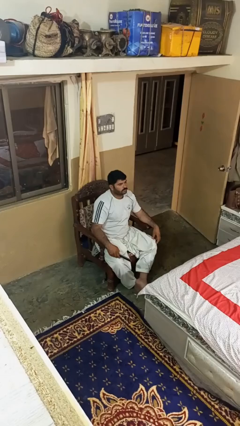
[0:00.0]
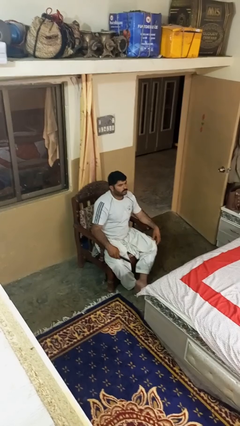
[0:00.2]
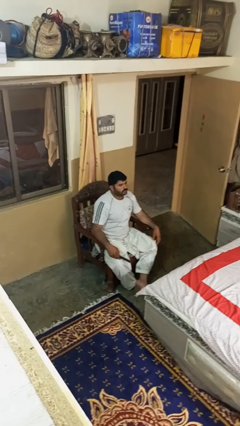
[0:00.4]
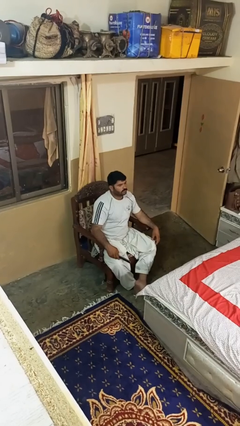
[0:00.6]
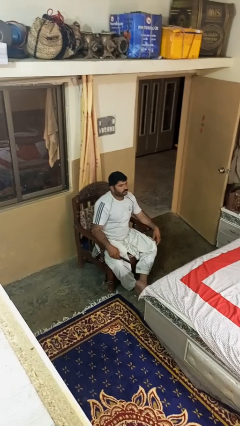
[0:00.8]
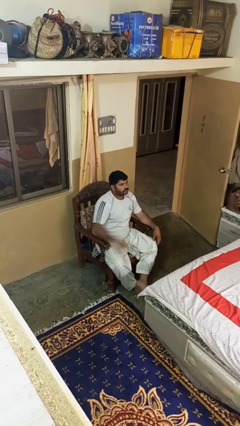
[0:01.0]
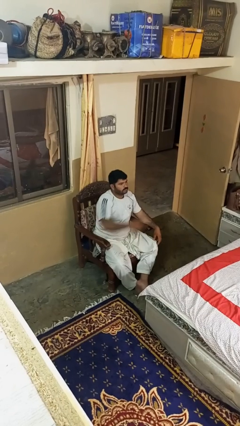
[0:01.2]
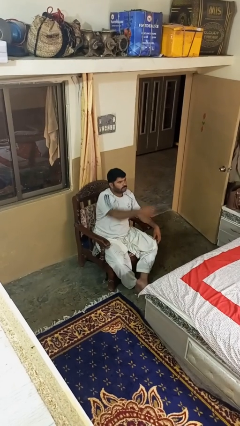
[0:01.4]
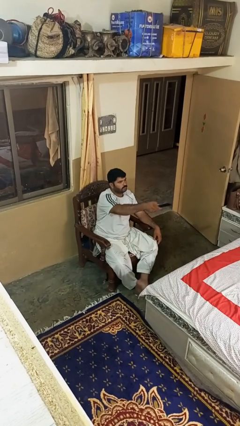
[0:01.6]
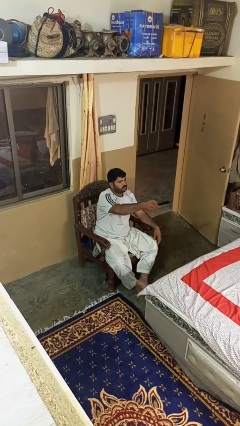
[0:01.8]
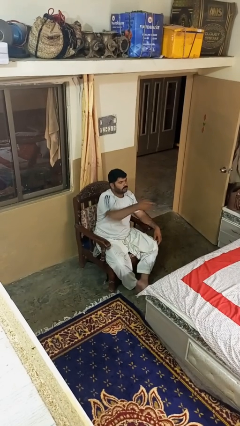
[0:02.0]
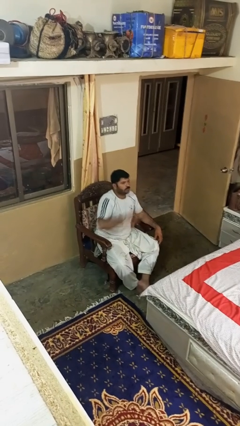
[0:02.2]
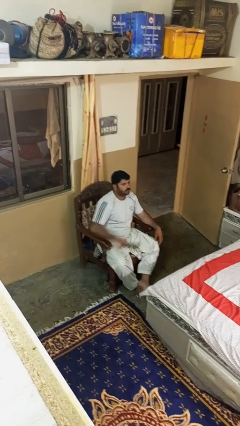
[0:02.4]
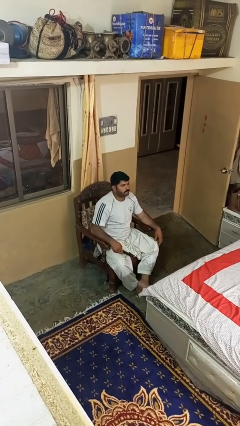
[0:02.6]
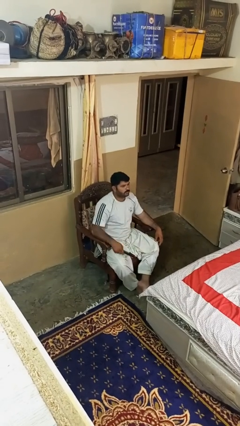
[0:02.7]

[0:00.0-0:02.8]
person uses television remote

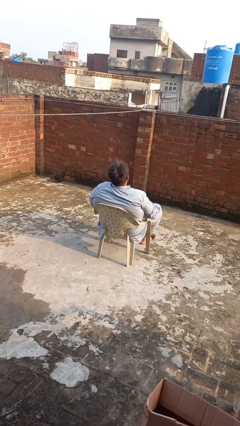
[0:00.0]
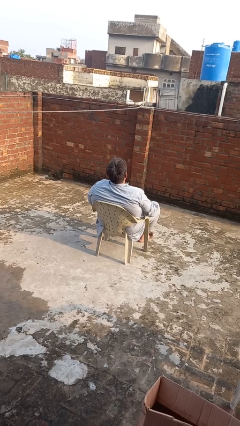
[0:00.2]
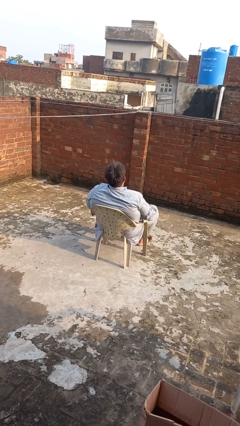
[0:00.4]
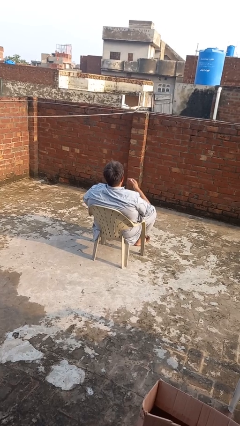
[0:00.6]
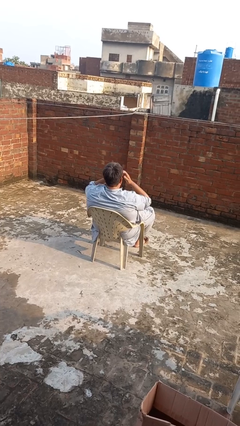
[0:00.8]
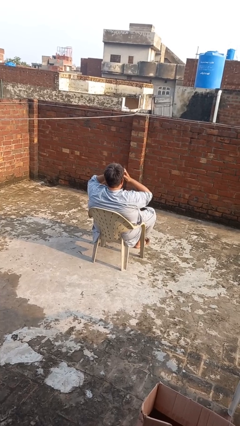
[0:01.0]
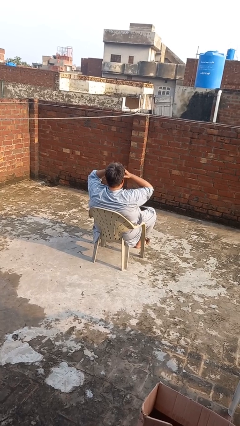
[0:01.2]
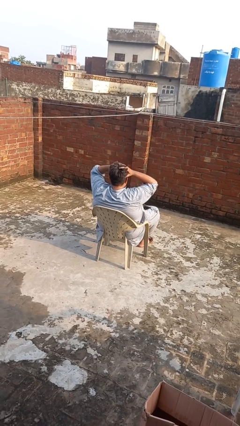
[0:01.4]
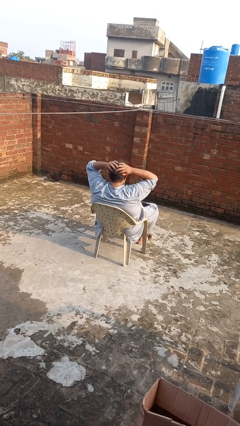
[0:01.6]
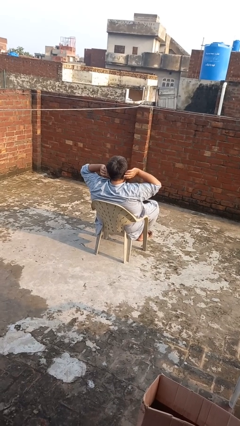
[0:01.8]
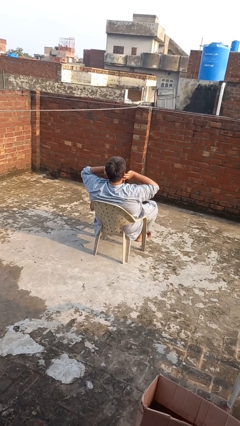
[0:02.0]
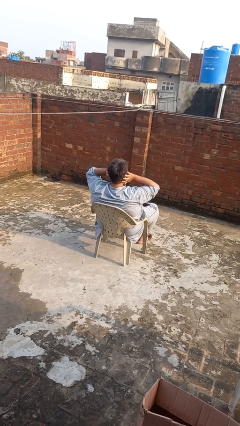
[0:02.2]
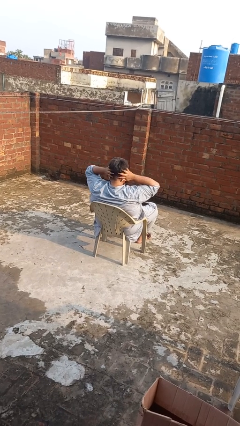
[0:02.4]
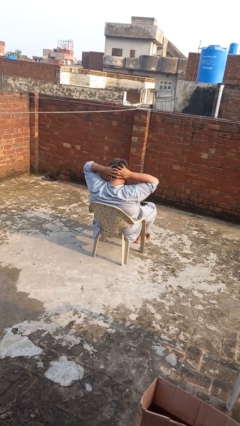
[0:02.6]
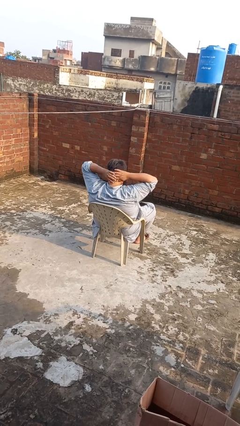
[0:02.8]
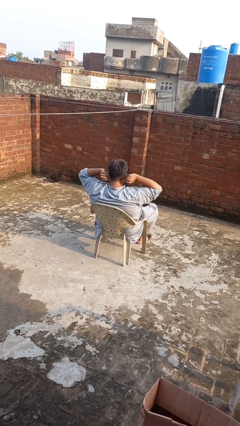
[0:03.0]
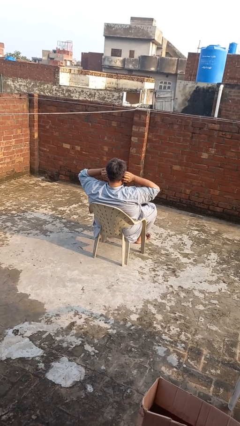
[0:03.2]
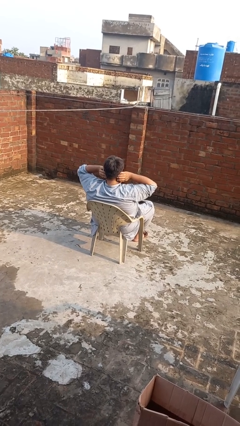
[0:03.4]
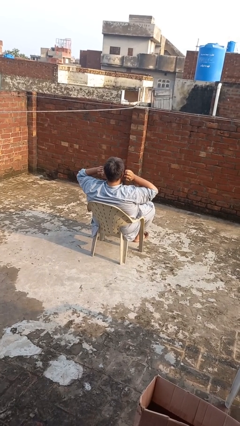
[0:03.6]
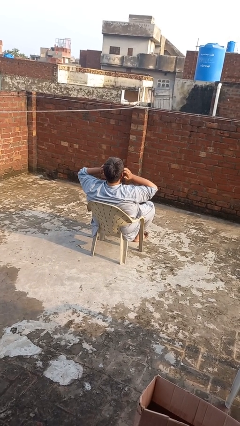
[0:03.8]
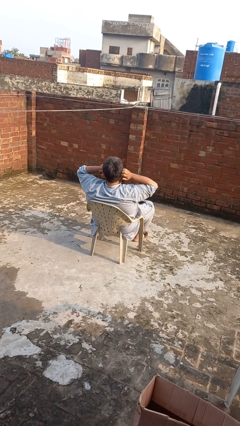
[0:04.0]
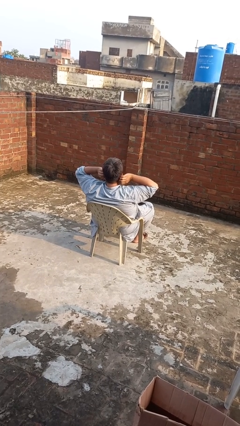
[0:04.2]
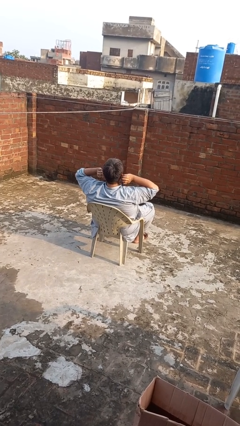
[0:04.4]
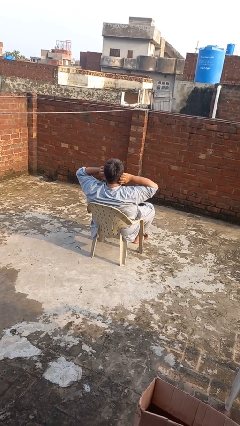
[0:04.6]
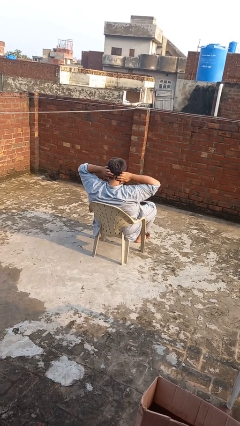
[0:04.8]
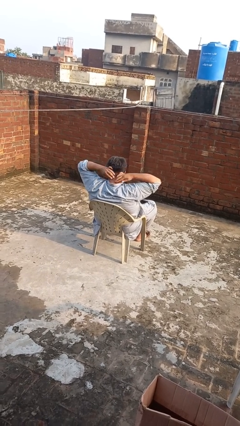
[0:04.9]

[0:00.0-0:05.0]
person strokes hair

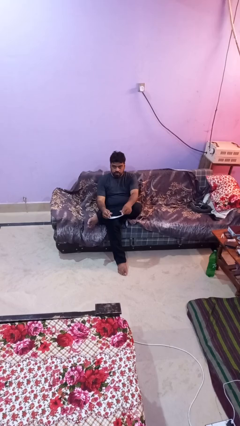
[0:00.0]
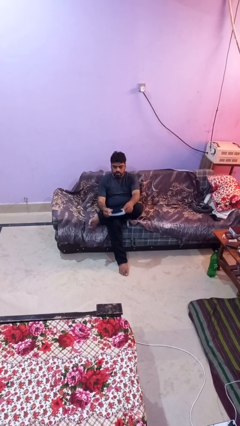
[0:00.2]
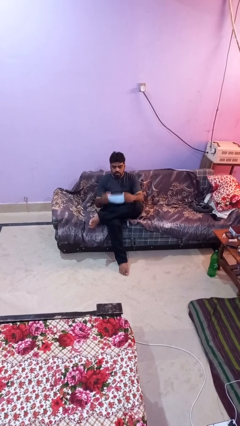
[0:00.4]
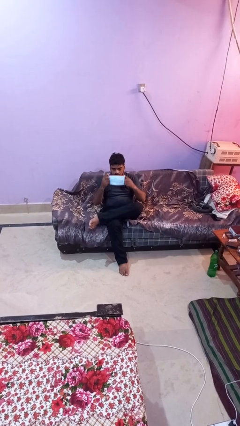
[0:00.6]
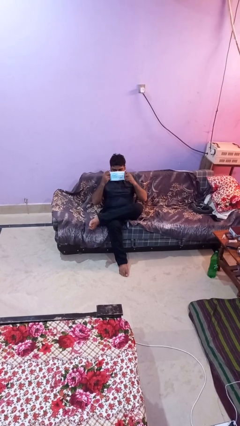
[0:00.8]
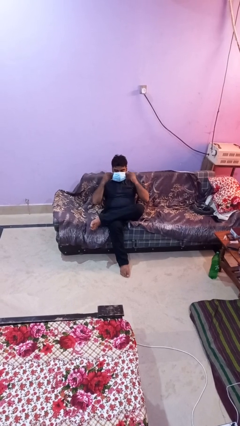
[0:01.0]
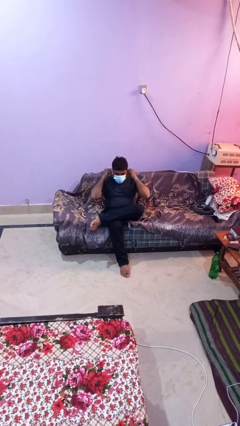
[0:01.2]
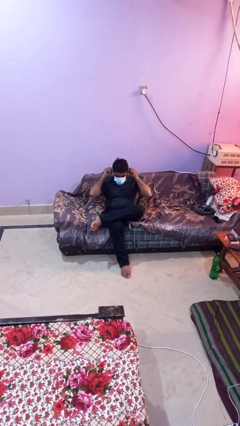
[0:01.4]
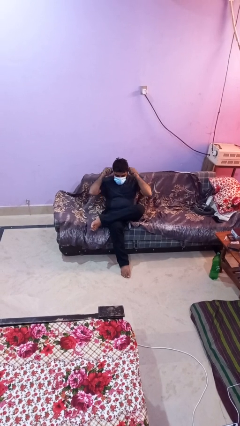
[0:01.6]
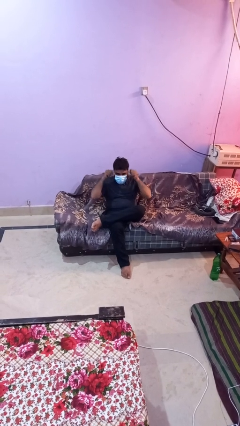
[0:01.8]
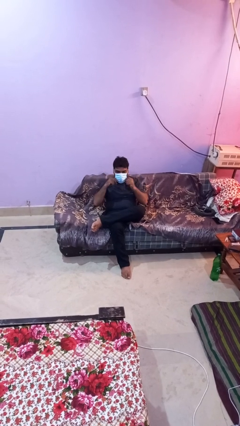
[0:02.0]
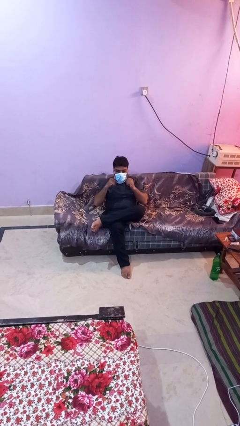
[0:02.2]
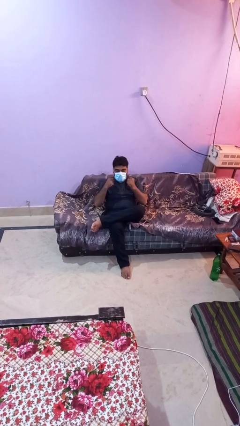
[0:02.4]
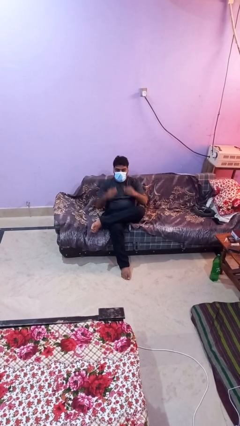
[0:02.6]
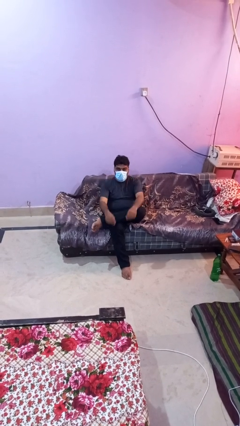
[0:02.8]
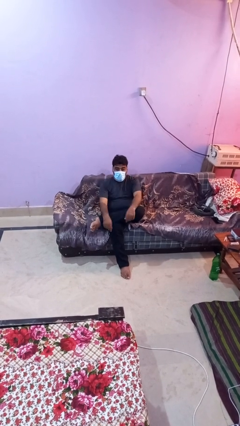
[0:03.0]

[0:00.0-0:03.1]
person puts on facemask

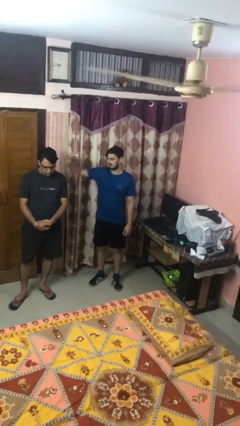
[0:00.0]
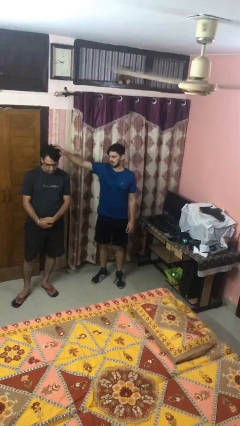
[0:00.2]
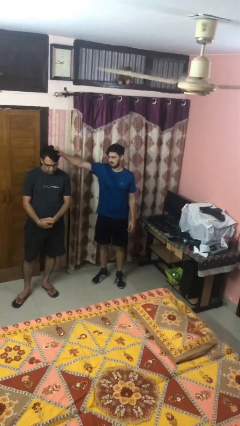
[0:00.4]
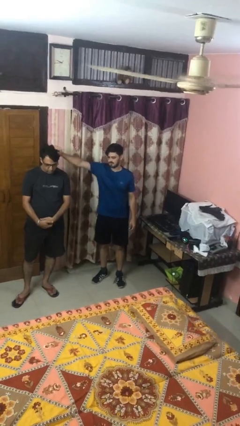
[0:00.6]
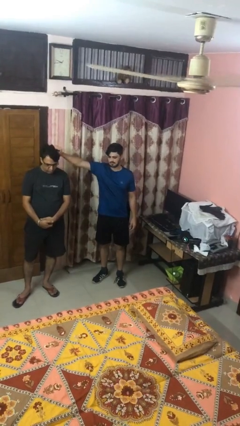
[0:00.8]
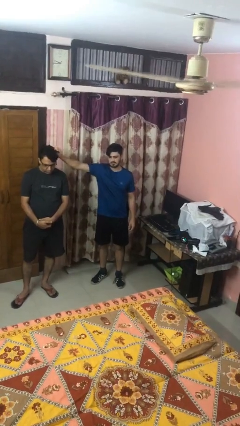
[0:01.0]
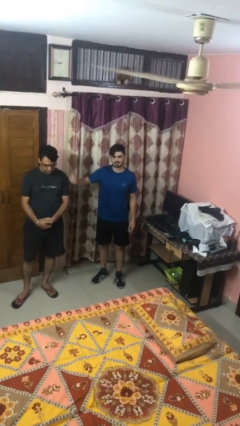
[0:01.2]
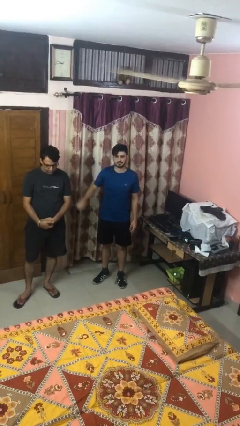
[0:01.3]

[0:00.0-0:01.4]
person grabs person by hair

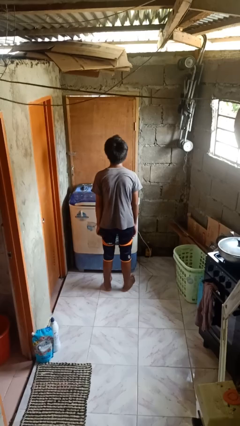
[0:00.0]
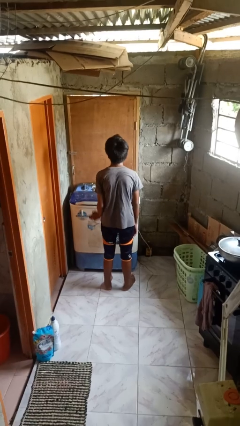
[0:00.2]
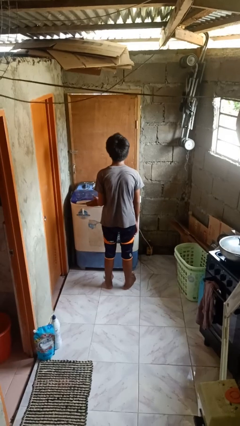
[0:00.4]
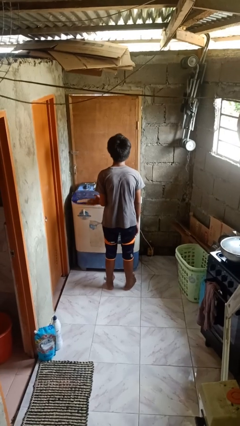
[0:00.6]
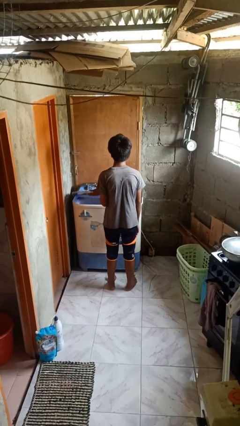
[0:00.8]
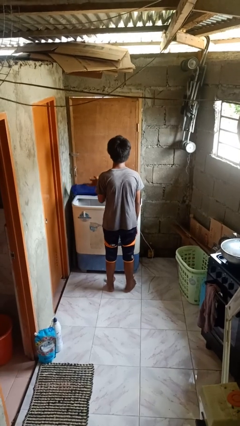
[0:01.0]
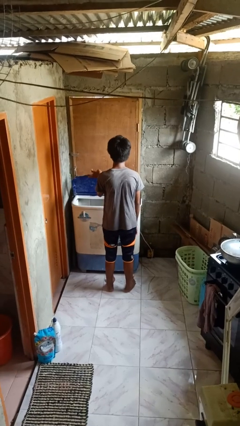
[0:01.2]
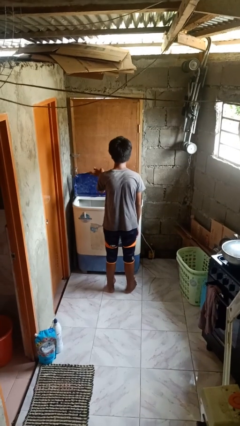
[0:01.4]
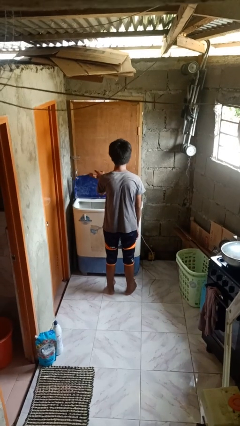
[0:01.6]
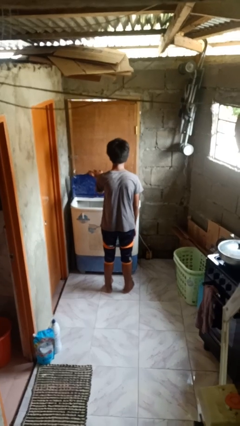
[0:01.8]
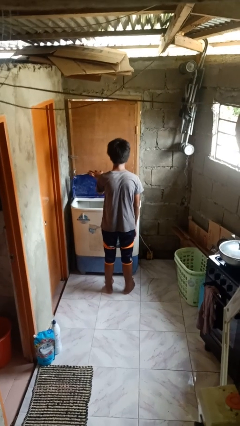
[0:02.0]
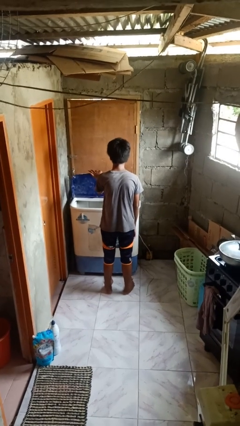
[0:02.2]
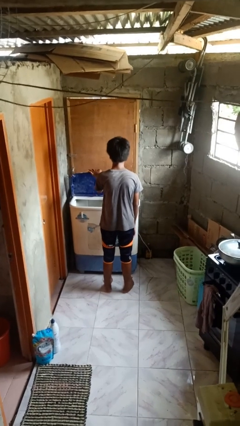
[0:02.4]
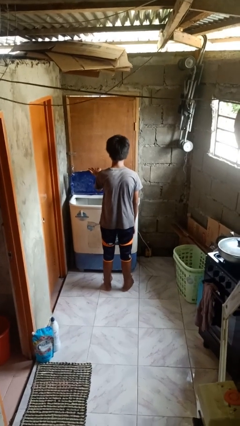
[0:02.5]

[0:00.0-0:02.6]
person opens clothes washer

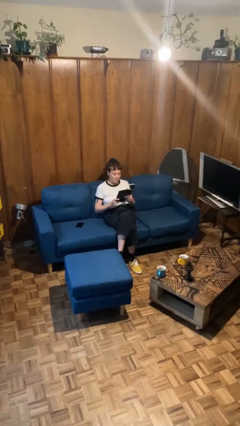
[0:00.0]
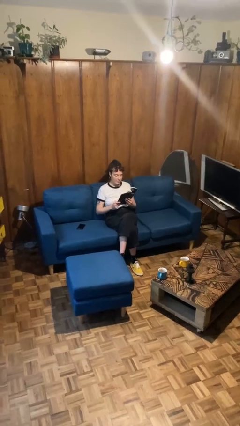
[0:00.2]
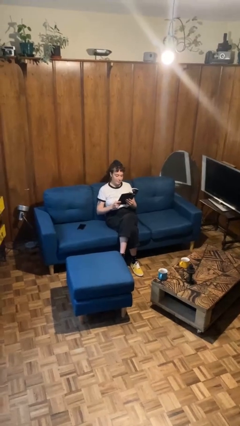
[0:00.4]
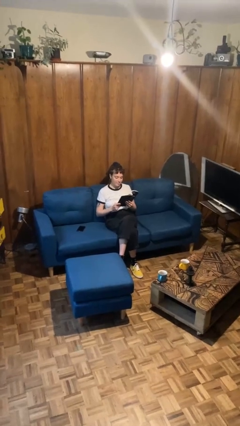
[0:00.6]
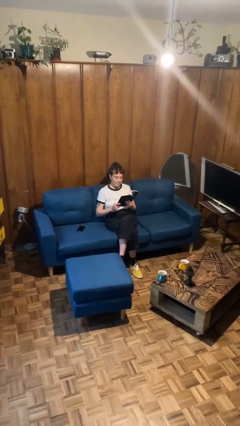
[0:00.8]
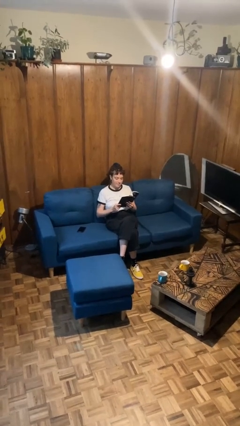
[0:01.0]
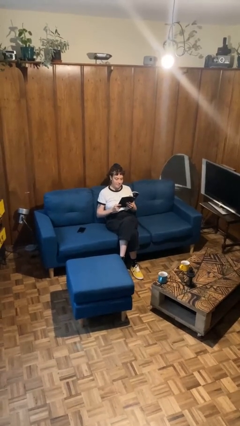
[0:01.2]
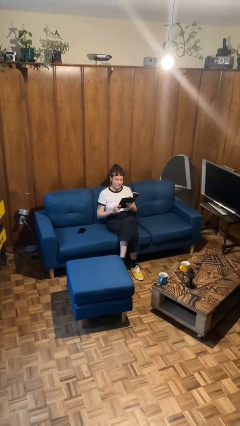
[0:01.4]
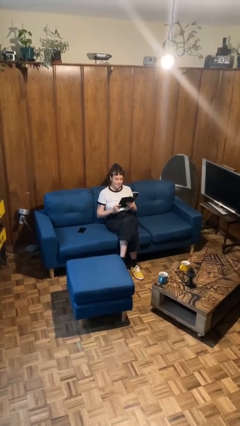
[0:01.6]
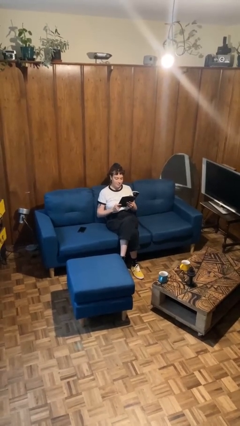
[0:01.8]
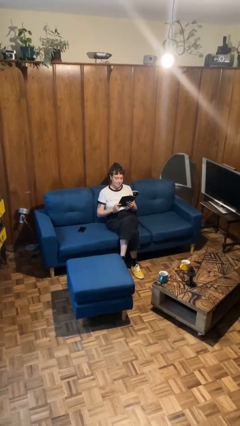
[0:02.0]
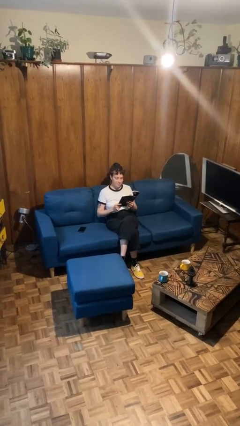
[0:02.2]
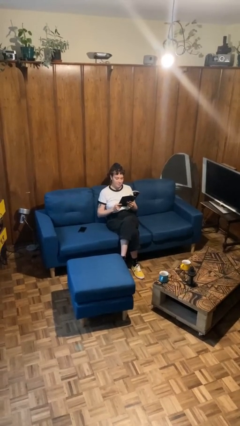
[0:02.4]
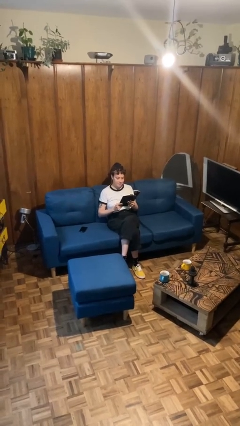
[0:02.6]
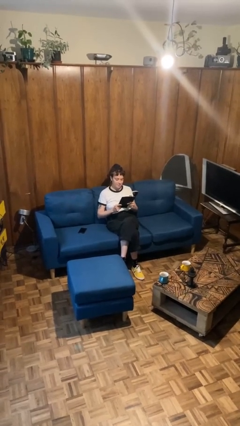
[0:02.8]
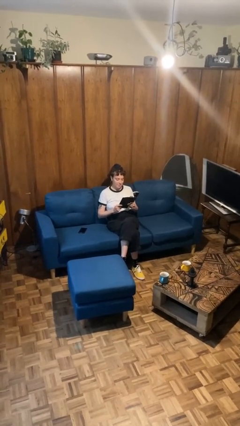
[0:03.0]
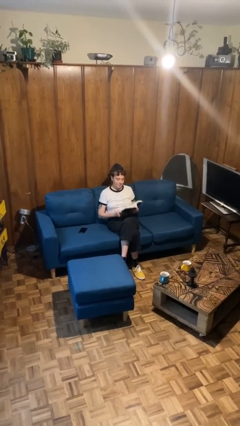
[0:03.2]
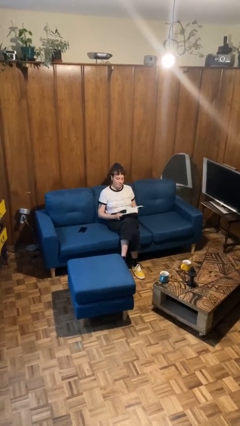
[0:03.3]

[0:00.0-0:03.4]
person reads document
